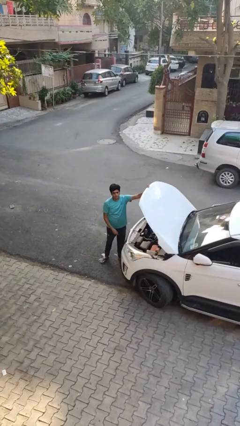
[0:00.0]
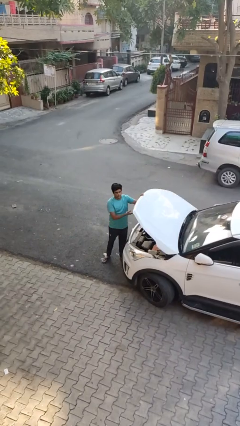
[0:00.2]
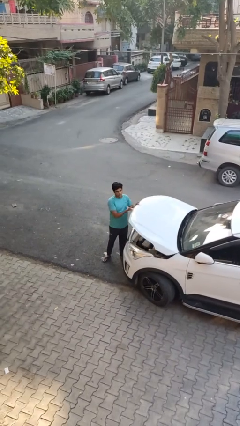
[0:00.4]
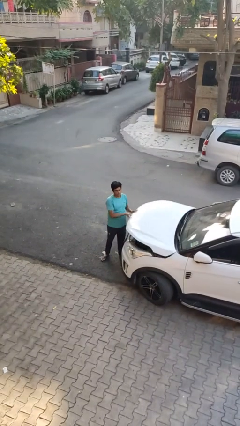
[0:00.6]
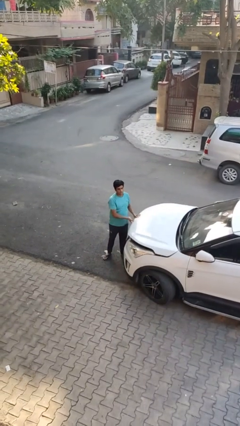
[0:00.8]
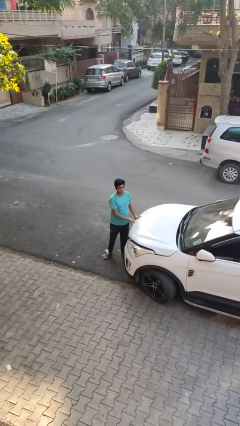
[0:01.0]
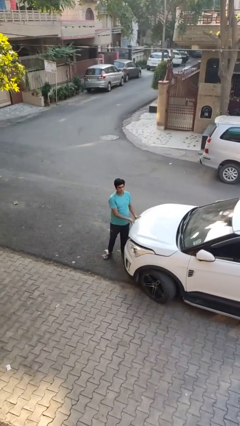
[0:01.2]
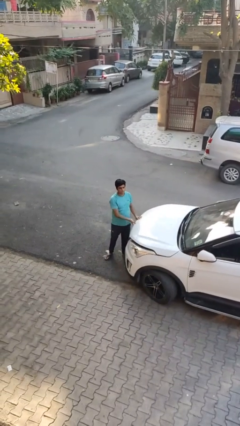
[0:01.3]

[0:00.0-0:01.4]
person closes car hood

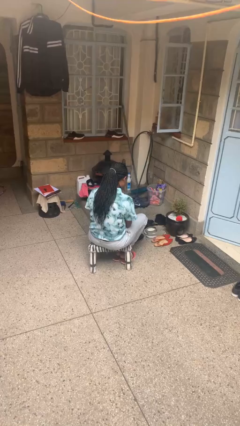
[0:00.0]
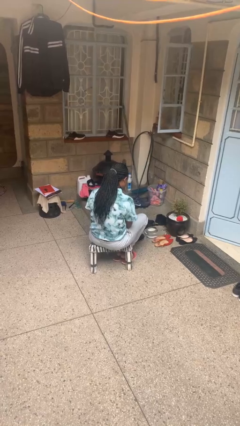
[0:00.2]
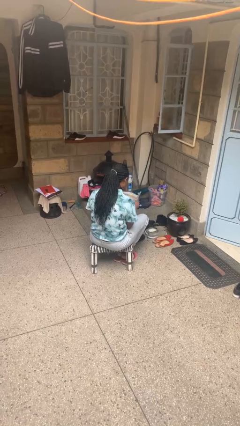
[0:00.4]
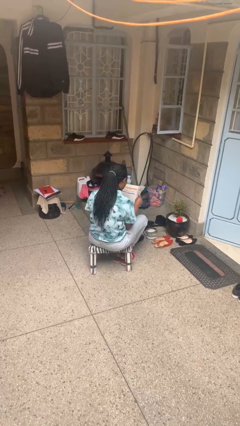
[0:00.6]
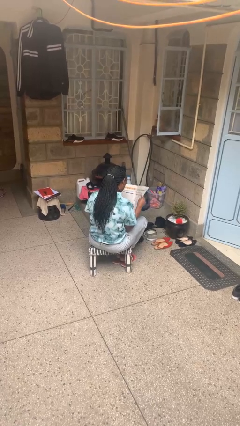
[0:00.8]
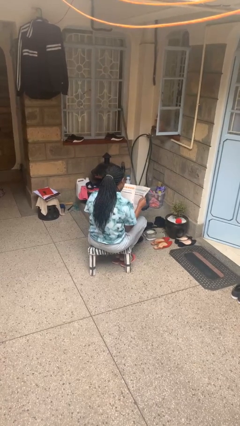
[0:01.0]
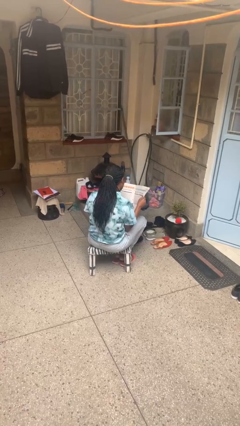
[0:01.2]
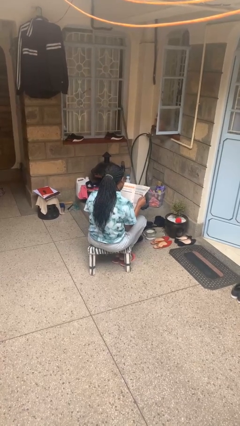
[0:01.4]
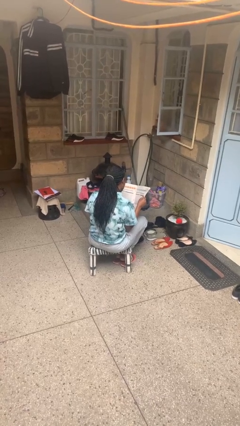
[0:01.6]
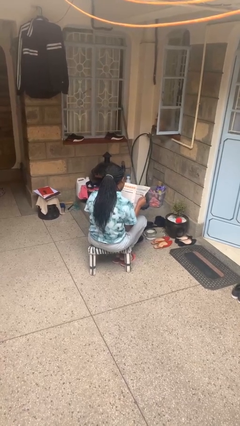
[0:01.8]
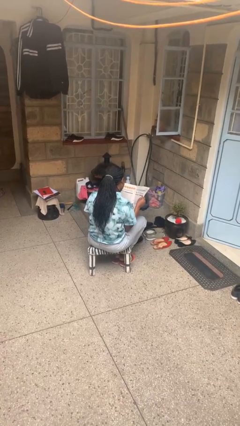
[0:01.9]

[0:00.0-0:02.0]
person reads newspaper

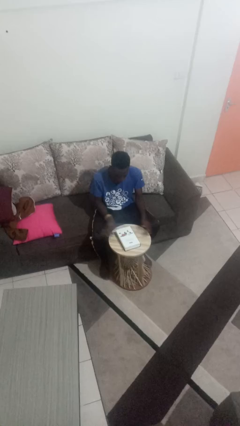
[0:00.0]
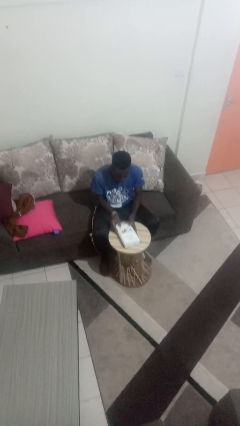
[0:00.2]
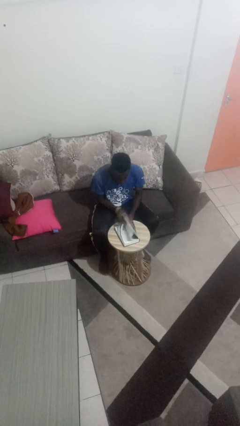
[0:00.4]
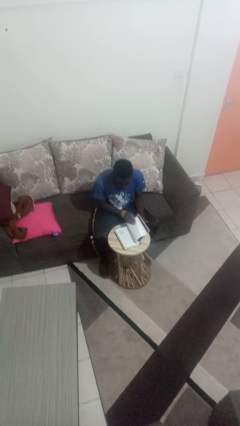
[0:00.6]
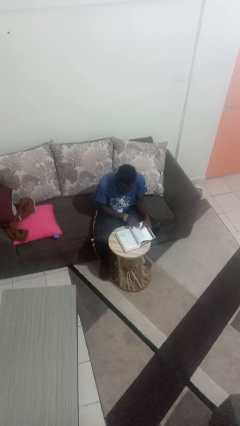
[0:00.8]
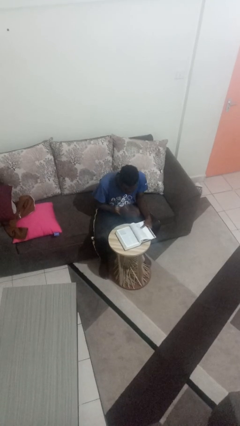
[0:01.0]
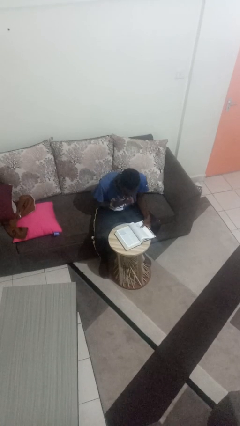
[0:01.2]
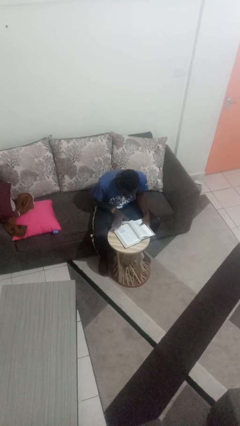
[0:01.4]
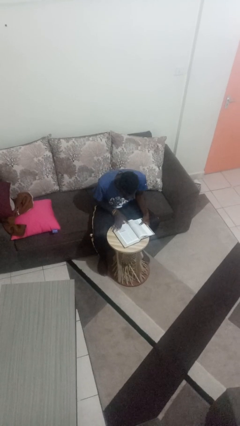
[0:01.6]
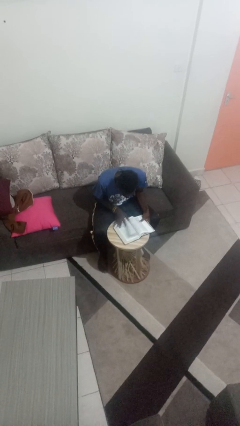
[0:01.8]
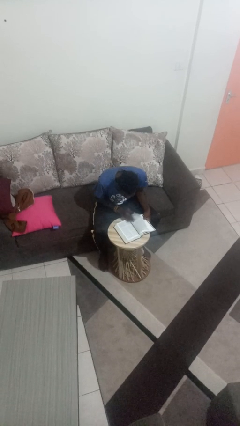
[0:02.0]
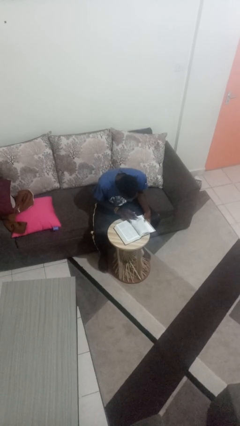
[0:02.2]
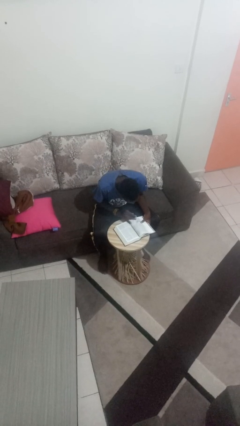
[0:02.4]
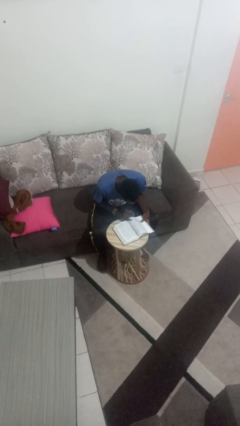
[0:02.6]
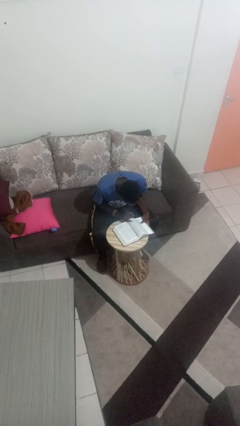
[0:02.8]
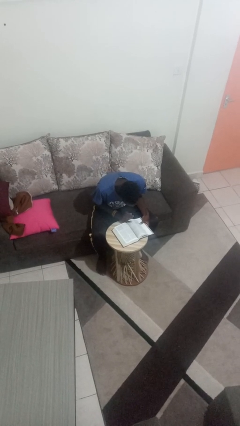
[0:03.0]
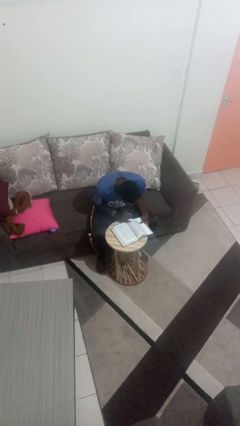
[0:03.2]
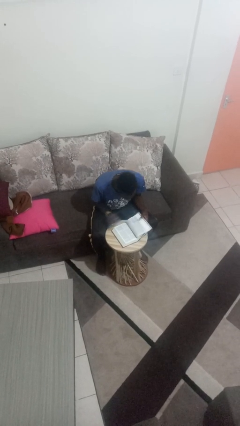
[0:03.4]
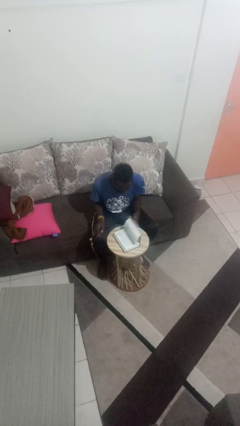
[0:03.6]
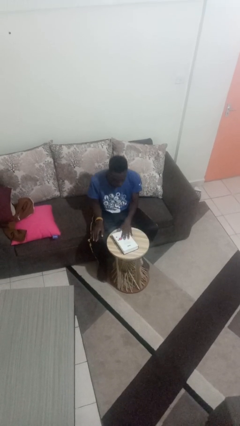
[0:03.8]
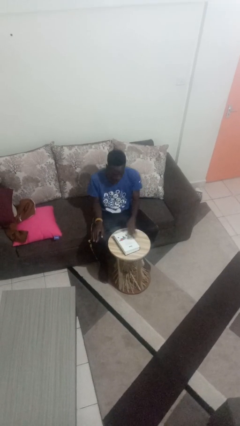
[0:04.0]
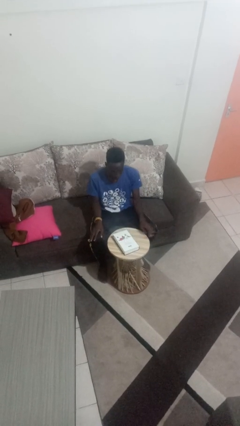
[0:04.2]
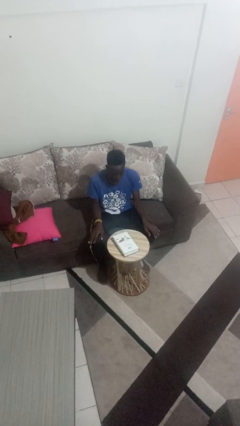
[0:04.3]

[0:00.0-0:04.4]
person reads book

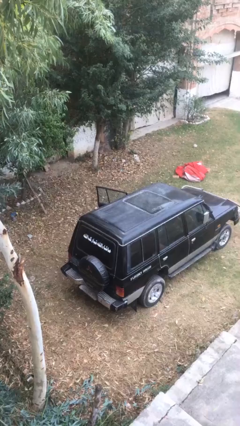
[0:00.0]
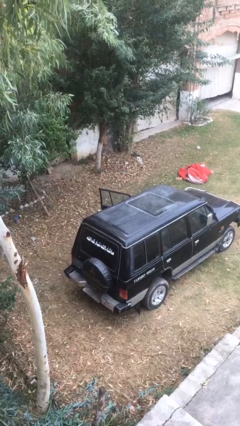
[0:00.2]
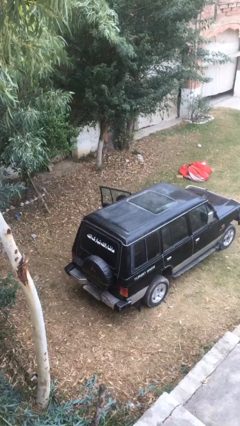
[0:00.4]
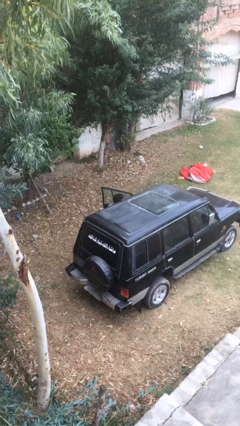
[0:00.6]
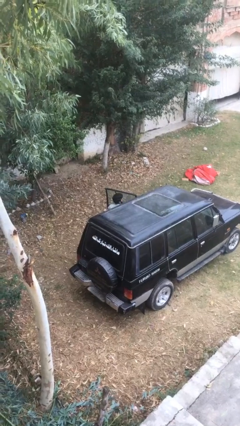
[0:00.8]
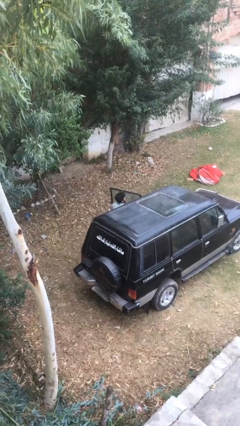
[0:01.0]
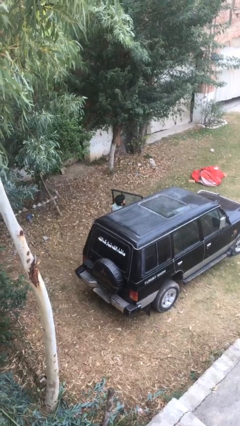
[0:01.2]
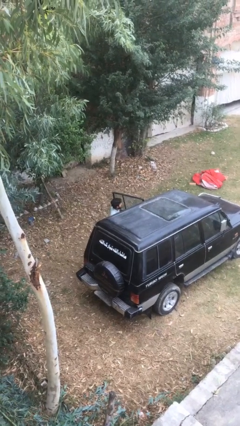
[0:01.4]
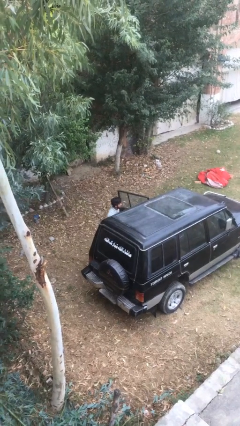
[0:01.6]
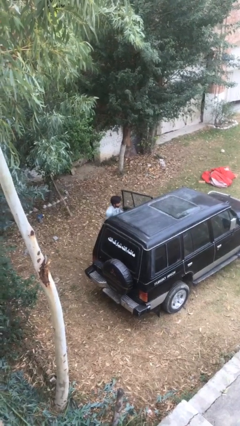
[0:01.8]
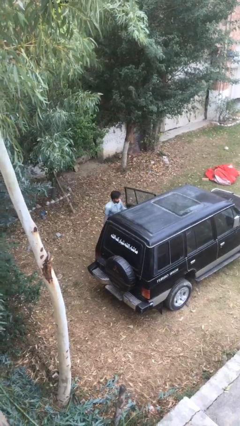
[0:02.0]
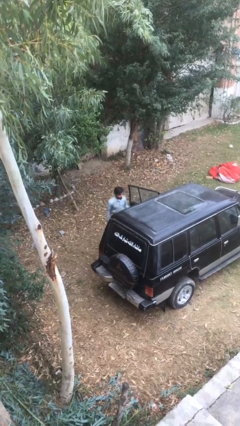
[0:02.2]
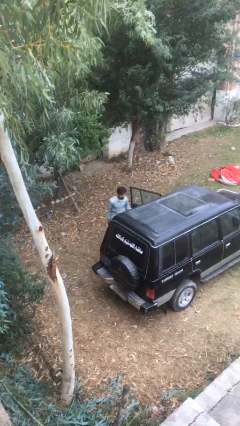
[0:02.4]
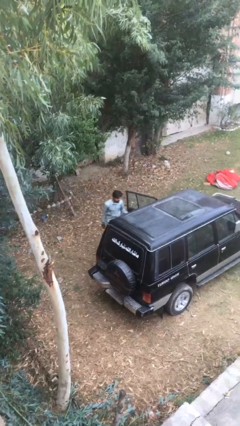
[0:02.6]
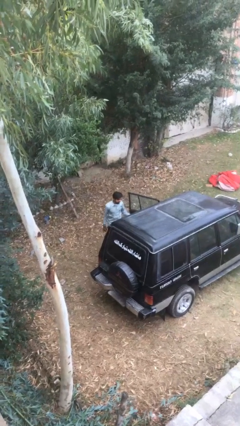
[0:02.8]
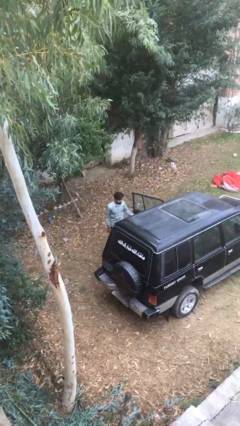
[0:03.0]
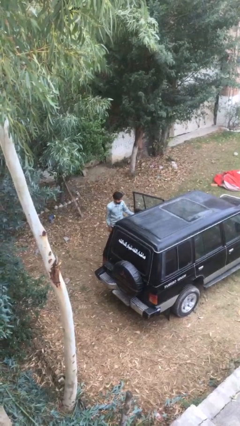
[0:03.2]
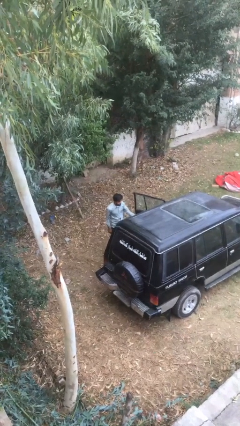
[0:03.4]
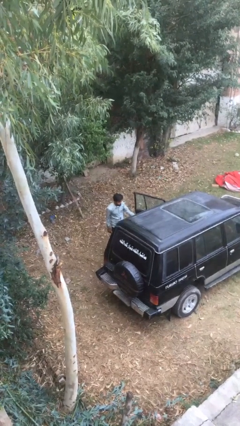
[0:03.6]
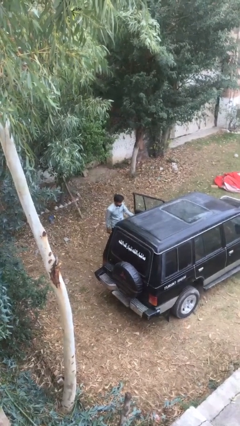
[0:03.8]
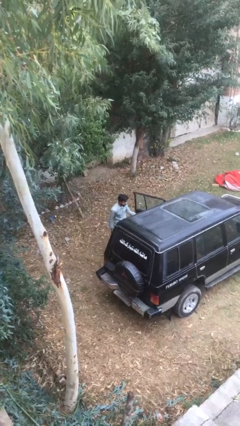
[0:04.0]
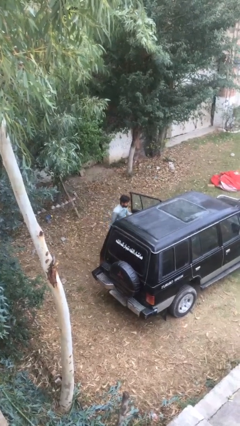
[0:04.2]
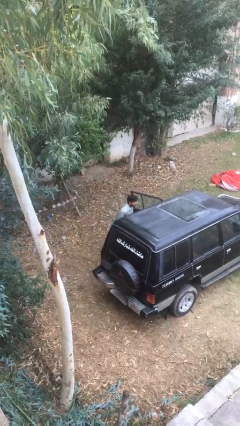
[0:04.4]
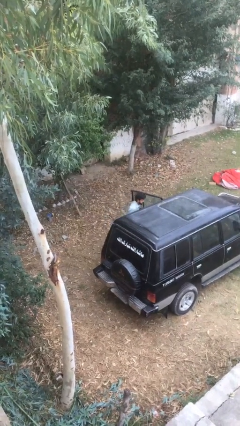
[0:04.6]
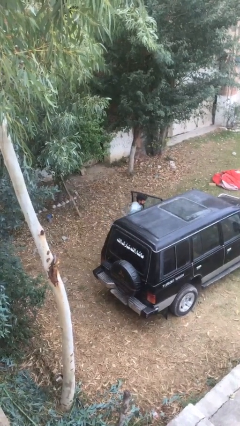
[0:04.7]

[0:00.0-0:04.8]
person exits car

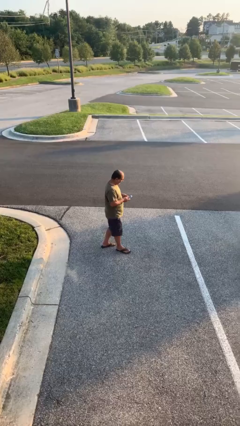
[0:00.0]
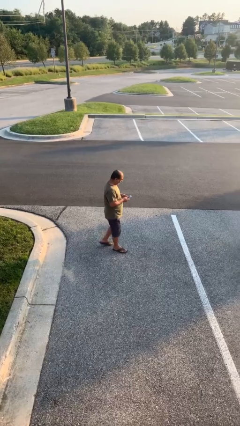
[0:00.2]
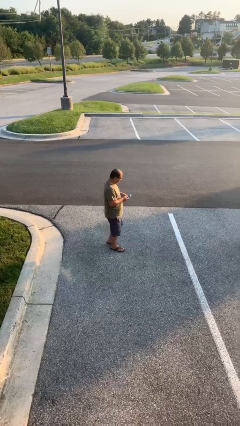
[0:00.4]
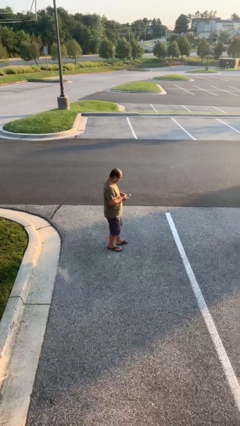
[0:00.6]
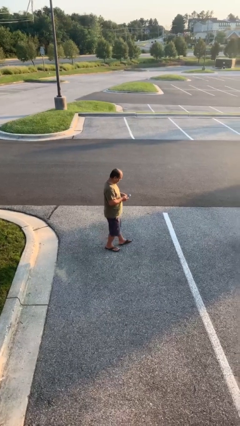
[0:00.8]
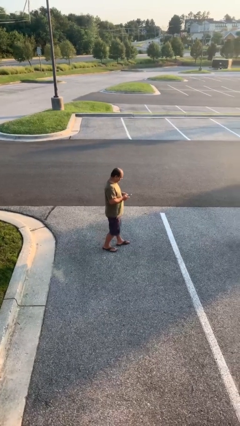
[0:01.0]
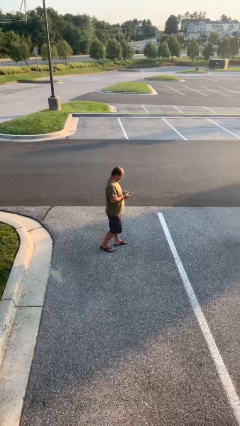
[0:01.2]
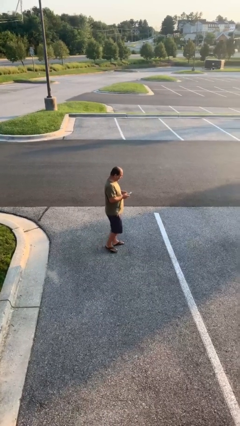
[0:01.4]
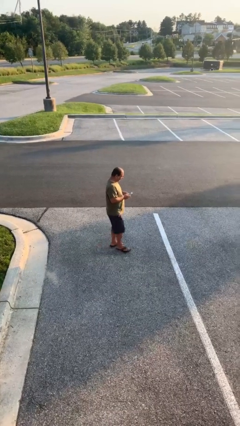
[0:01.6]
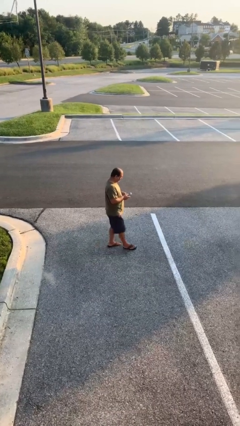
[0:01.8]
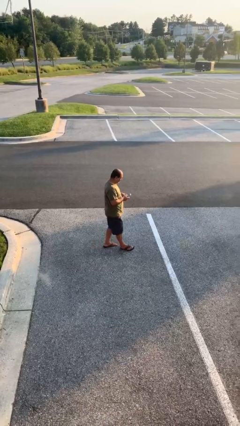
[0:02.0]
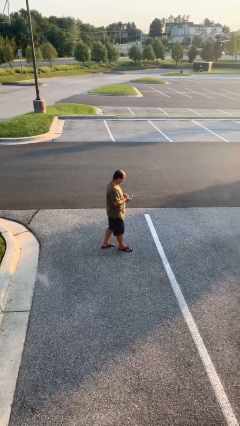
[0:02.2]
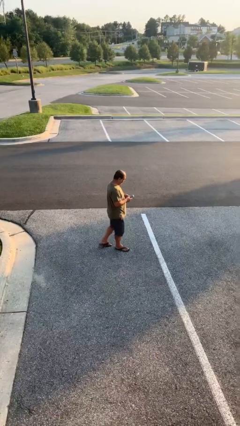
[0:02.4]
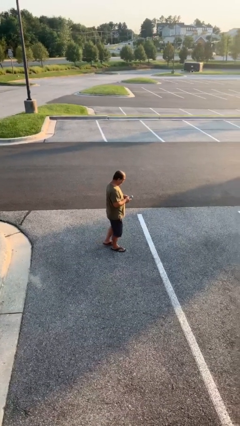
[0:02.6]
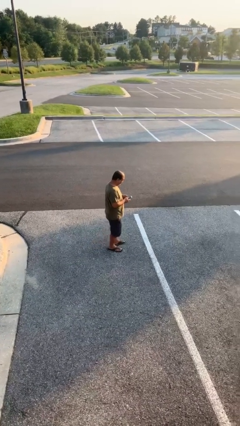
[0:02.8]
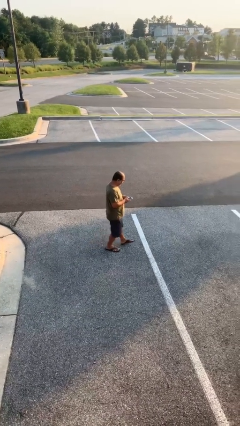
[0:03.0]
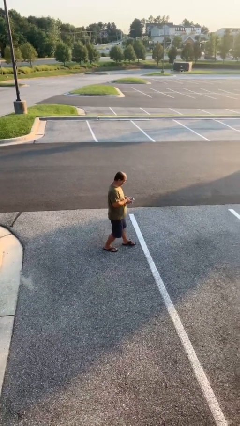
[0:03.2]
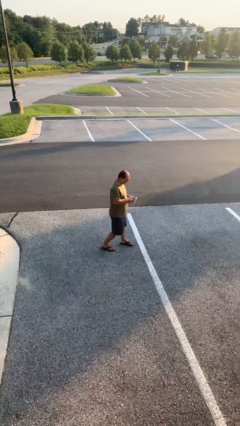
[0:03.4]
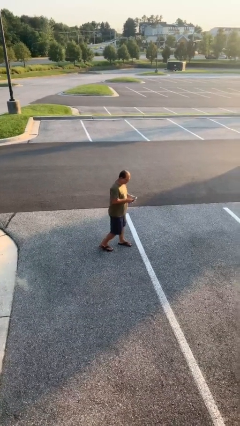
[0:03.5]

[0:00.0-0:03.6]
person texts on phone

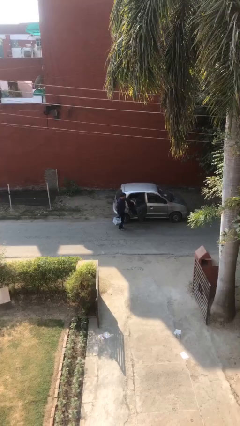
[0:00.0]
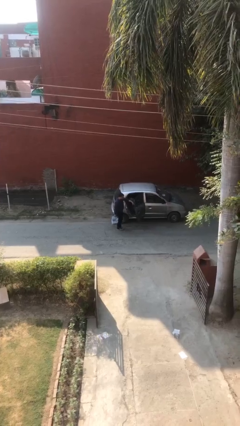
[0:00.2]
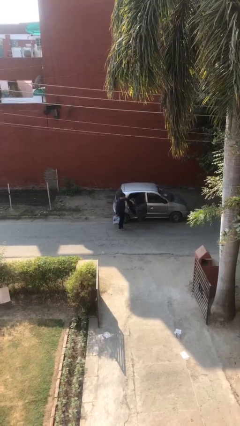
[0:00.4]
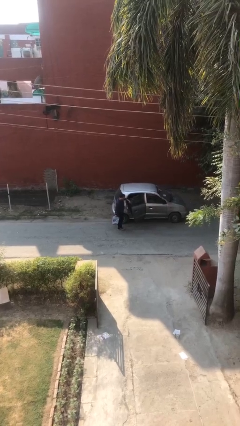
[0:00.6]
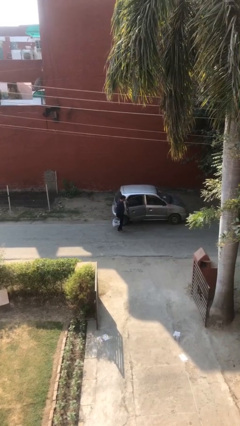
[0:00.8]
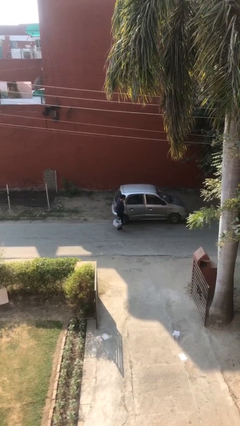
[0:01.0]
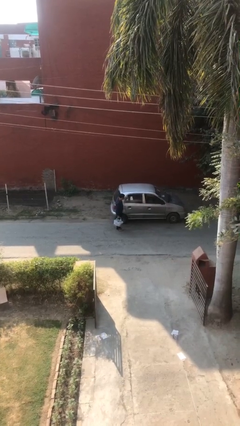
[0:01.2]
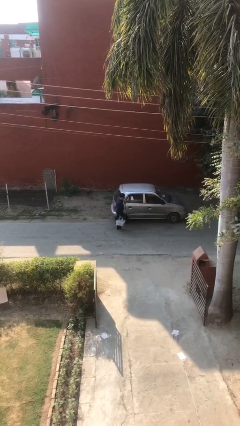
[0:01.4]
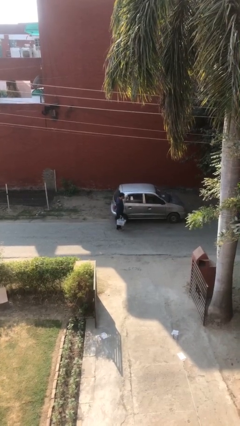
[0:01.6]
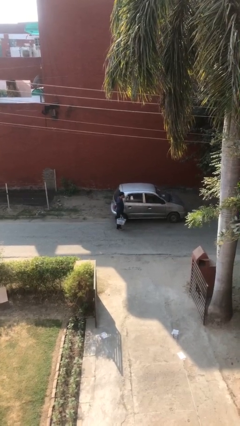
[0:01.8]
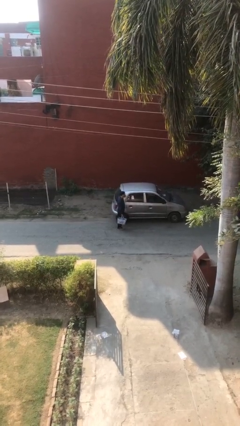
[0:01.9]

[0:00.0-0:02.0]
person closes car door
